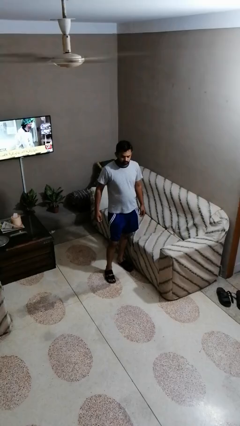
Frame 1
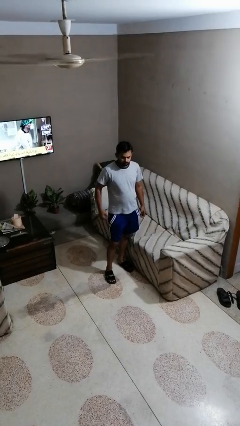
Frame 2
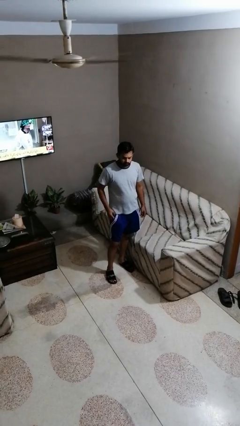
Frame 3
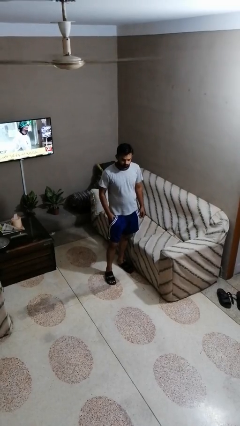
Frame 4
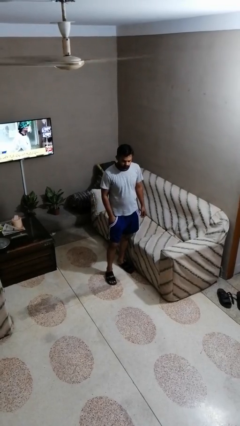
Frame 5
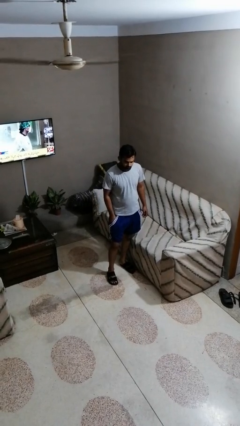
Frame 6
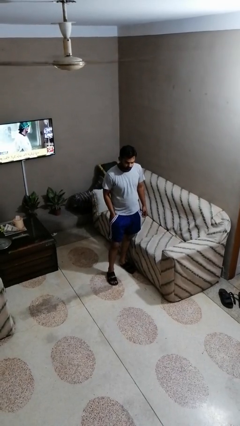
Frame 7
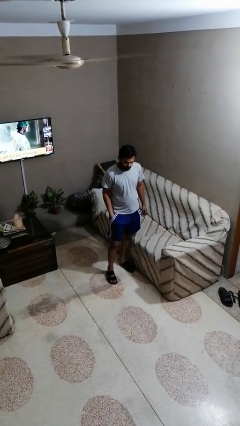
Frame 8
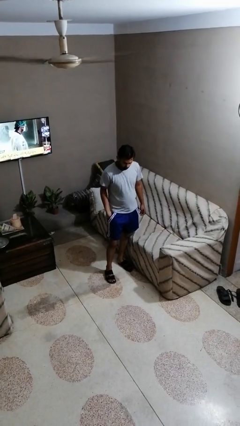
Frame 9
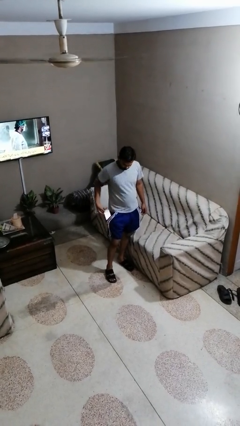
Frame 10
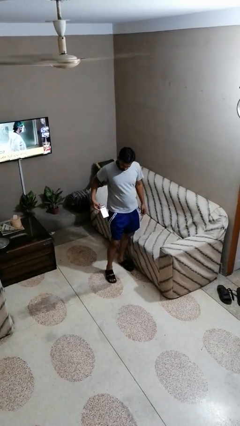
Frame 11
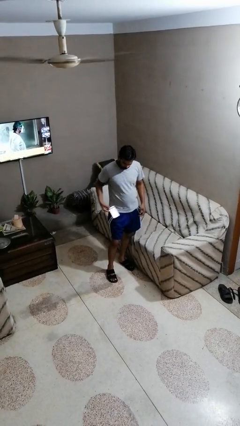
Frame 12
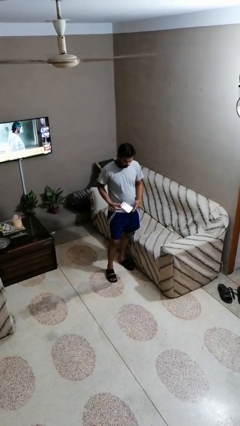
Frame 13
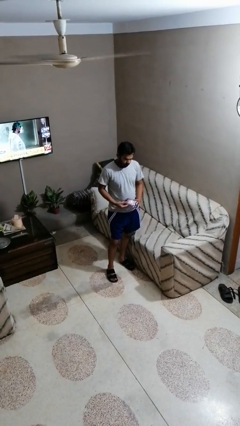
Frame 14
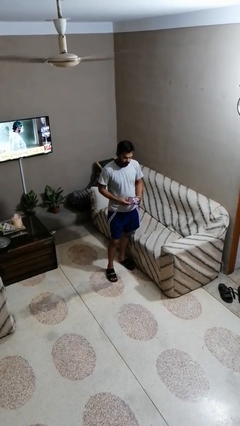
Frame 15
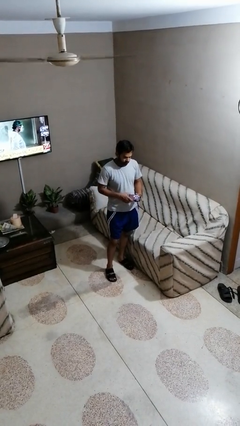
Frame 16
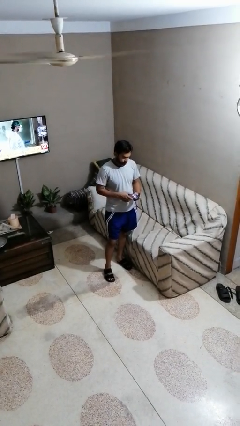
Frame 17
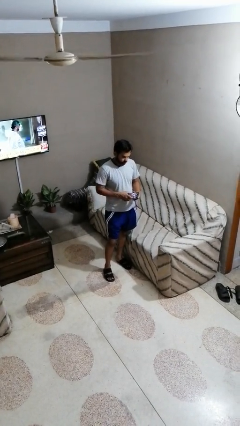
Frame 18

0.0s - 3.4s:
person takes phone from pocket

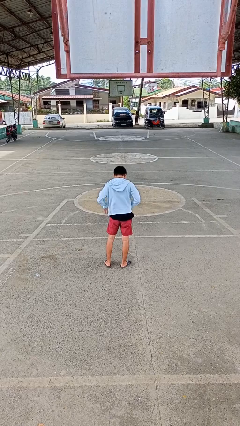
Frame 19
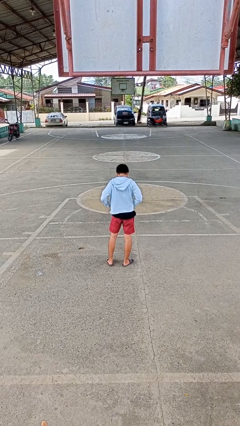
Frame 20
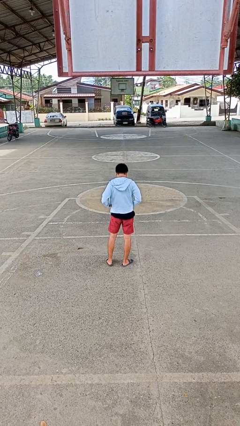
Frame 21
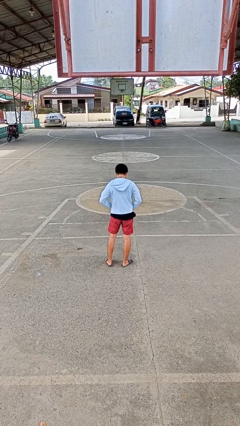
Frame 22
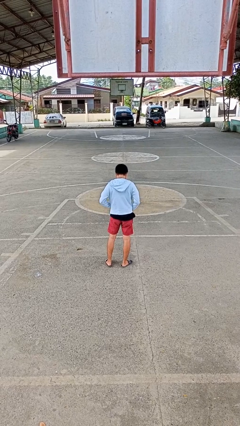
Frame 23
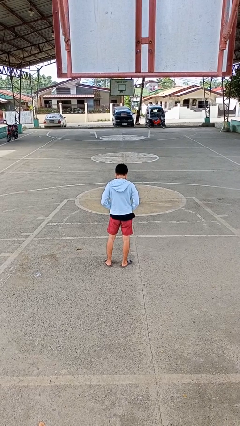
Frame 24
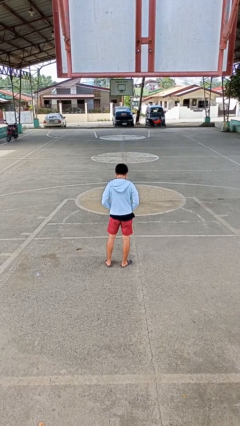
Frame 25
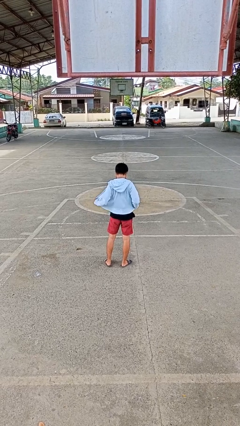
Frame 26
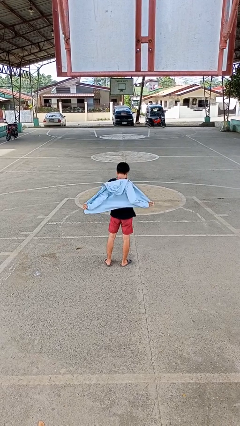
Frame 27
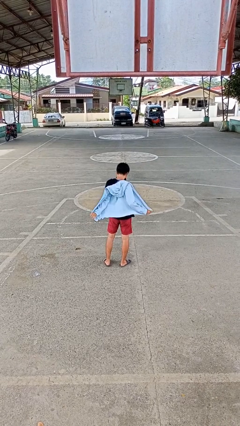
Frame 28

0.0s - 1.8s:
person unzips jacket

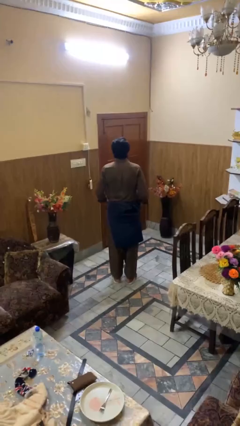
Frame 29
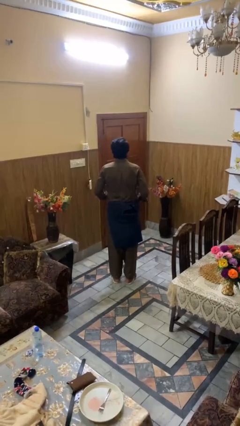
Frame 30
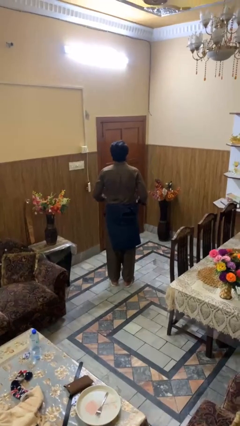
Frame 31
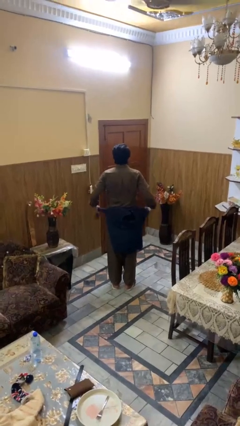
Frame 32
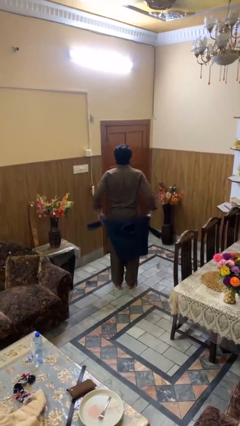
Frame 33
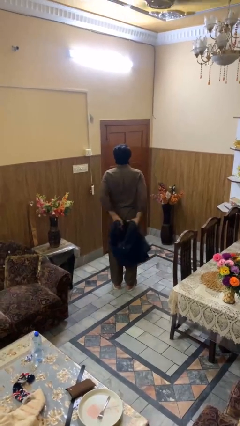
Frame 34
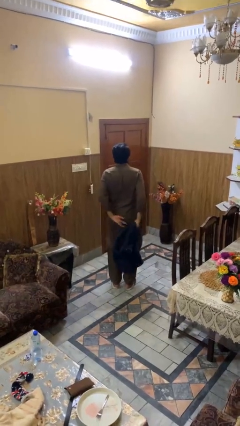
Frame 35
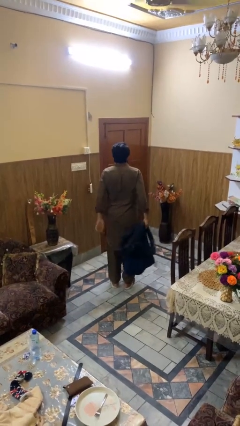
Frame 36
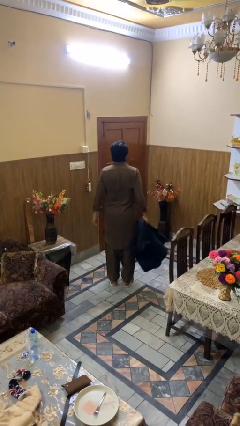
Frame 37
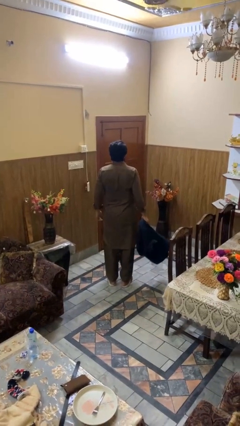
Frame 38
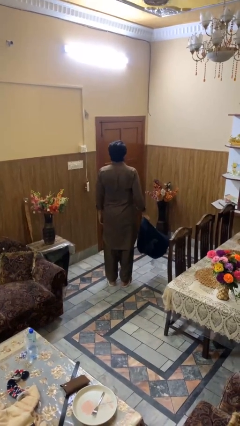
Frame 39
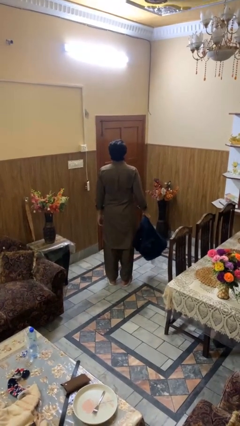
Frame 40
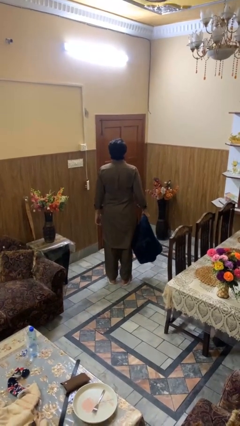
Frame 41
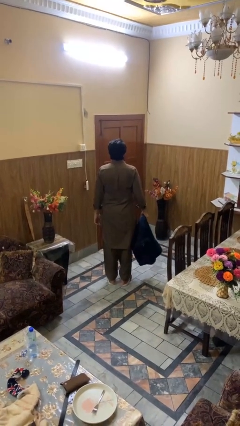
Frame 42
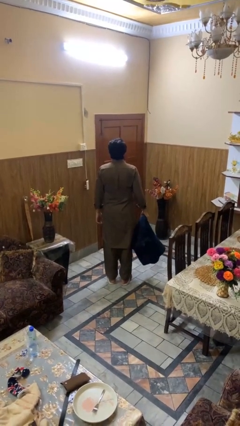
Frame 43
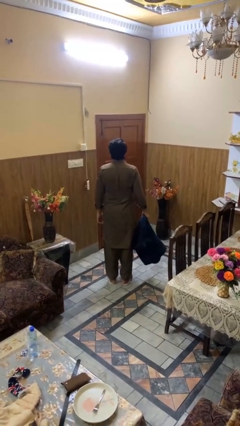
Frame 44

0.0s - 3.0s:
person unties jacket around waist

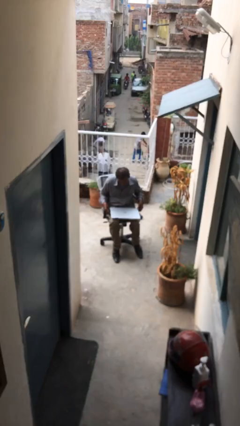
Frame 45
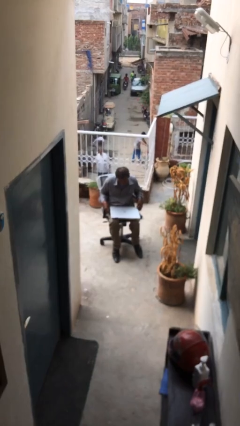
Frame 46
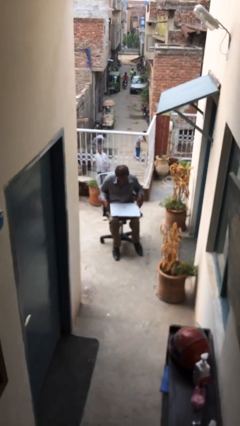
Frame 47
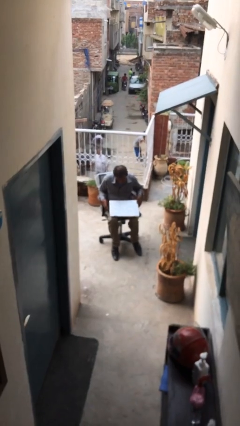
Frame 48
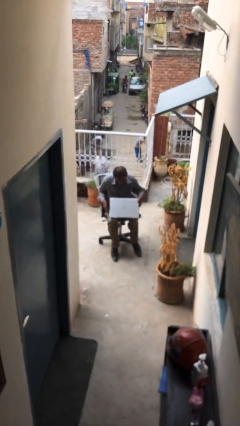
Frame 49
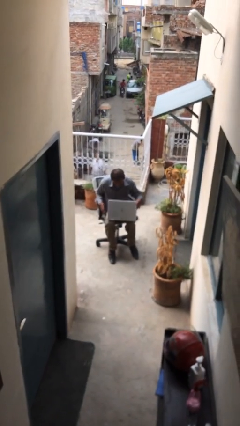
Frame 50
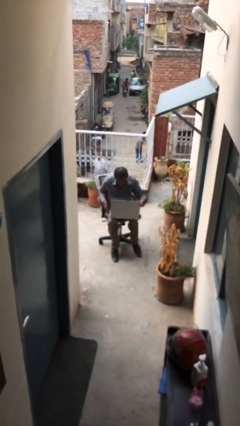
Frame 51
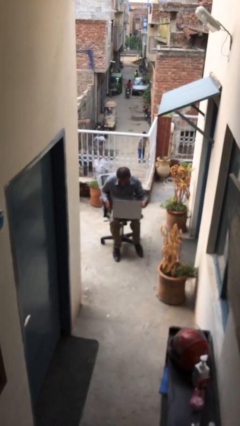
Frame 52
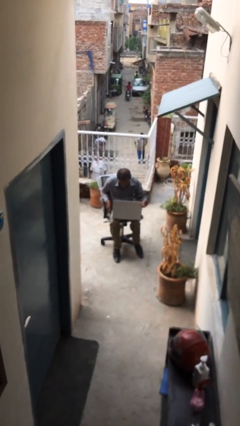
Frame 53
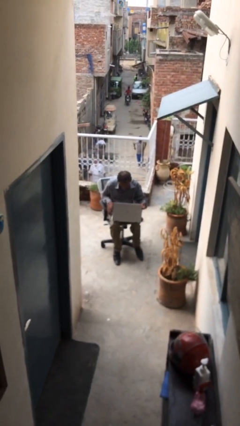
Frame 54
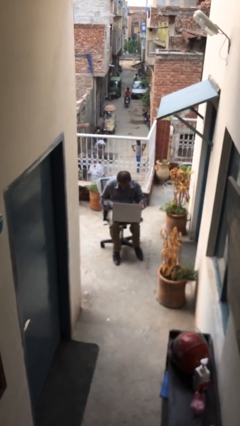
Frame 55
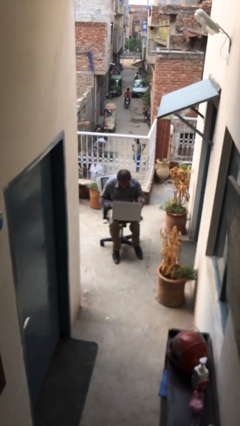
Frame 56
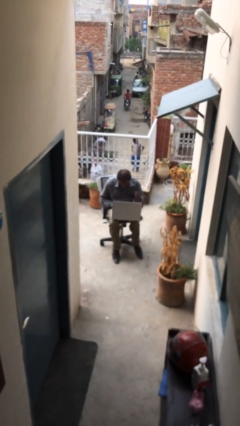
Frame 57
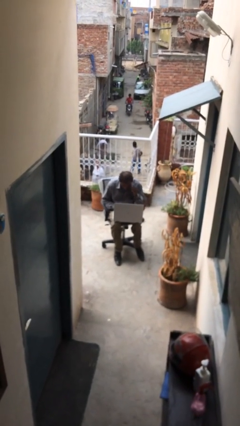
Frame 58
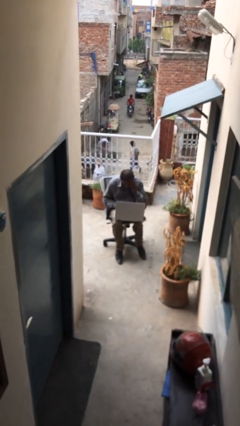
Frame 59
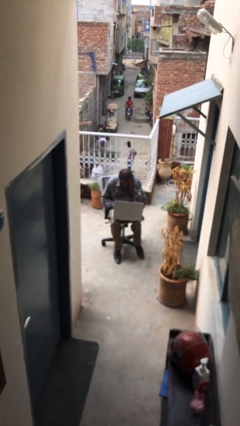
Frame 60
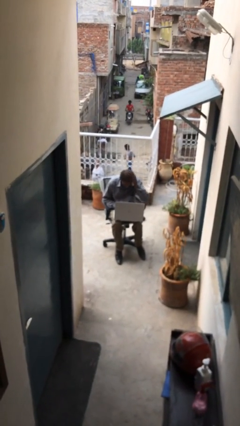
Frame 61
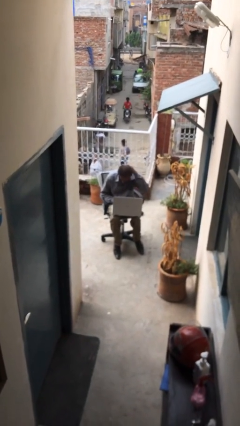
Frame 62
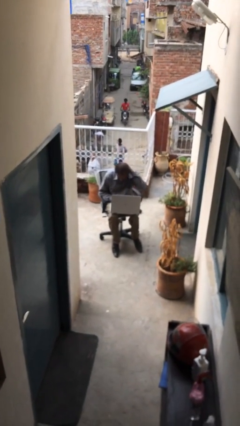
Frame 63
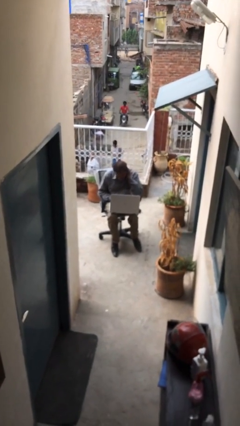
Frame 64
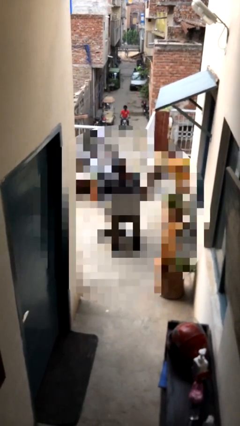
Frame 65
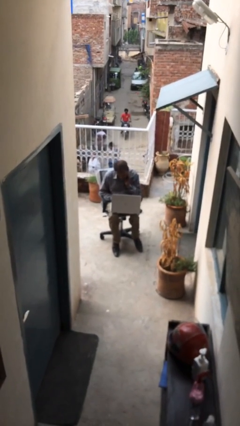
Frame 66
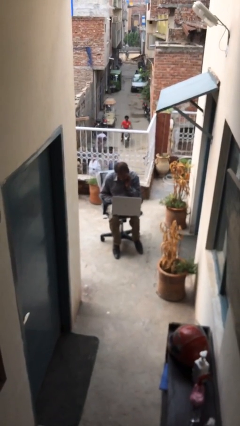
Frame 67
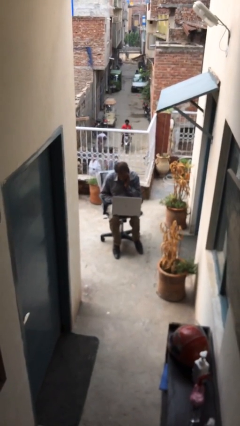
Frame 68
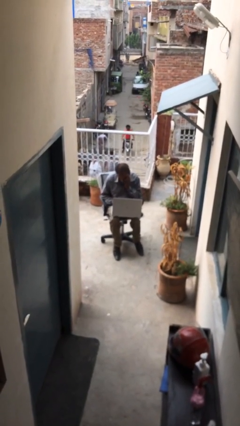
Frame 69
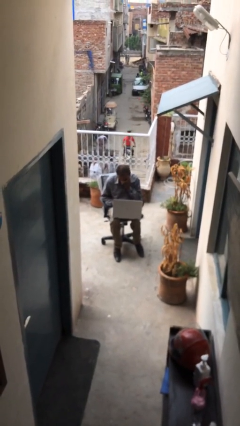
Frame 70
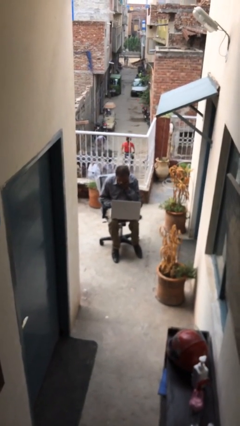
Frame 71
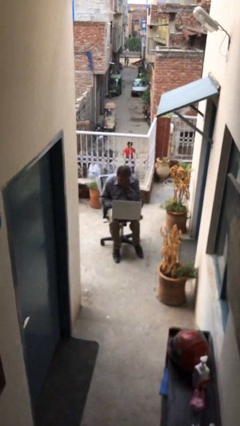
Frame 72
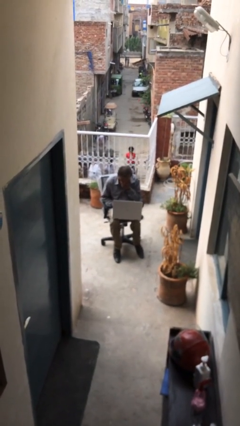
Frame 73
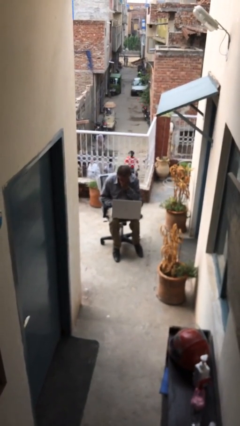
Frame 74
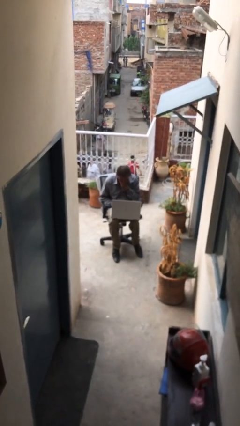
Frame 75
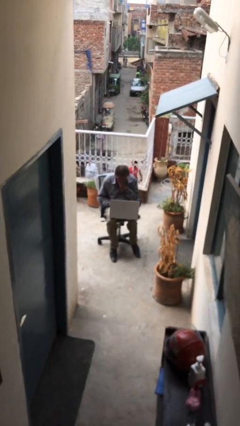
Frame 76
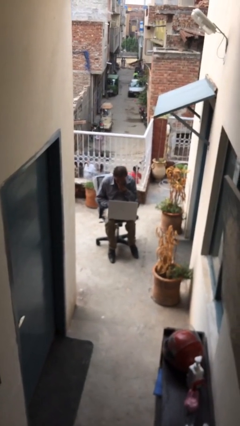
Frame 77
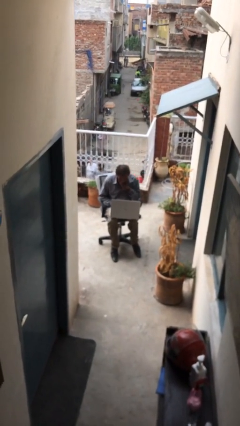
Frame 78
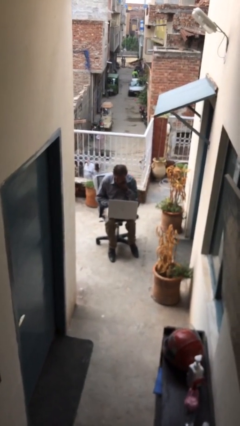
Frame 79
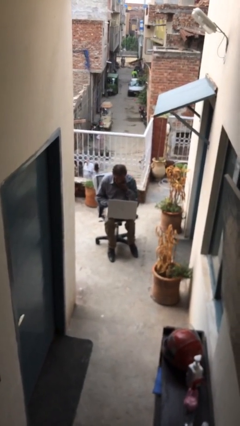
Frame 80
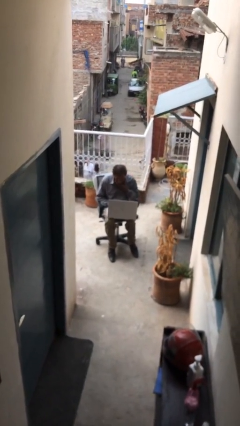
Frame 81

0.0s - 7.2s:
person interacts with laptop

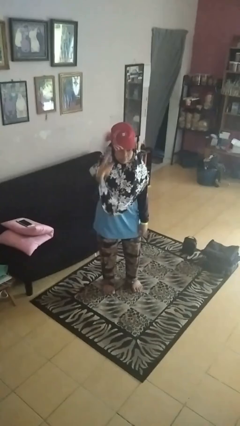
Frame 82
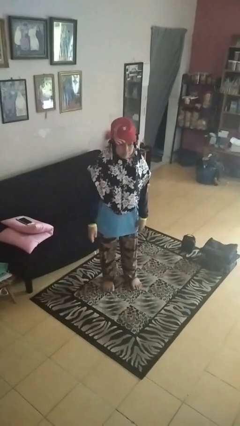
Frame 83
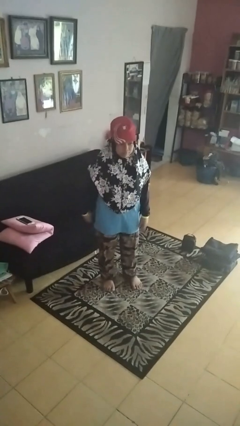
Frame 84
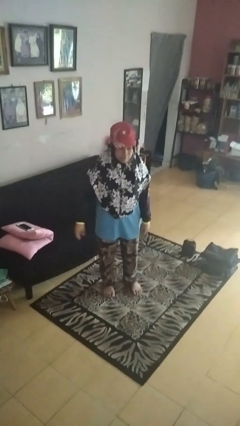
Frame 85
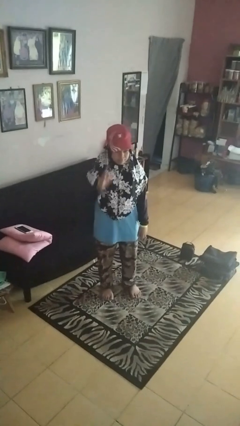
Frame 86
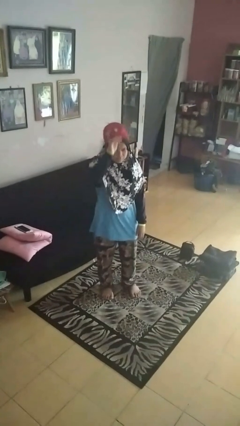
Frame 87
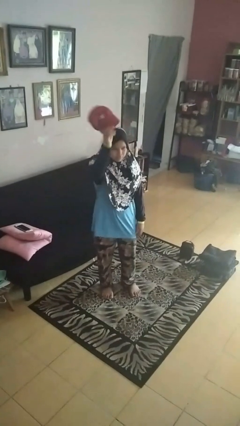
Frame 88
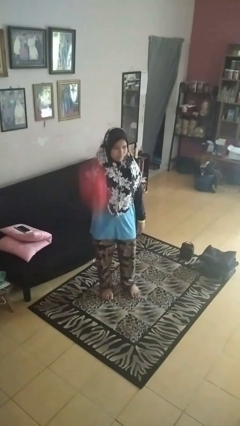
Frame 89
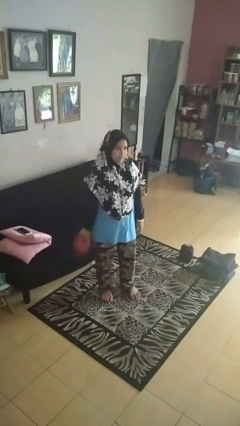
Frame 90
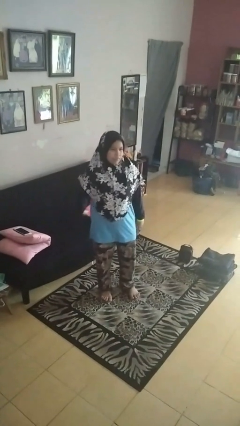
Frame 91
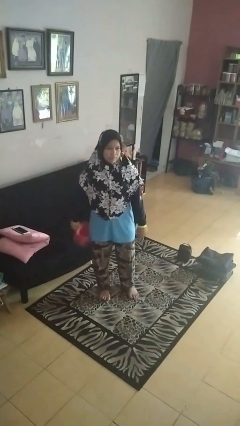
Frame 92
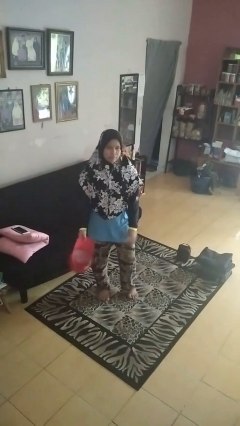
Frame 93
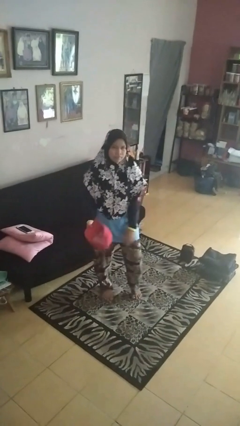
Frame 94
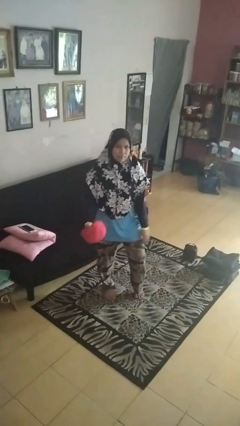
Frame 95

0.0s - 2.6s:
person takes off hat
